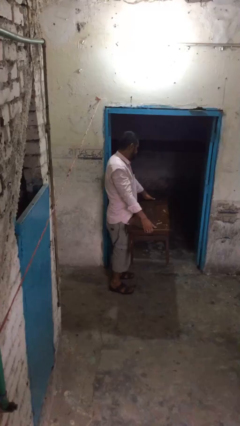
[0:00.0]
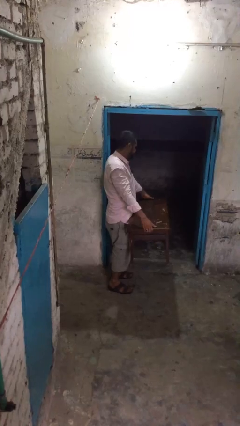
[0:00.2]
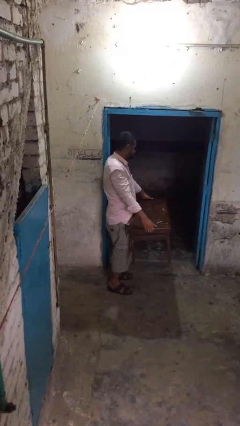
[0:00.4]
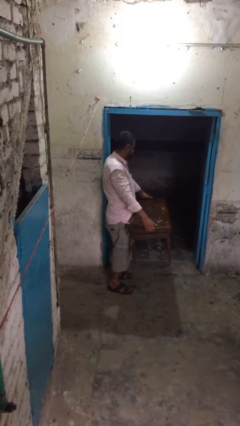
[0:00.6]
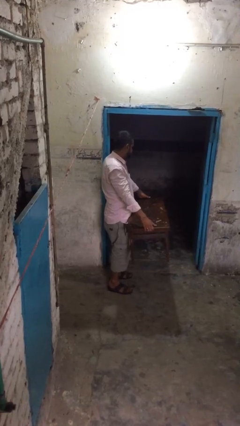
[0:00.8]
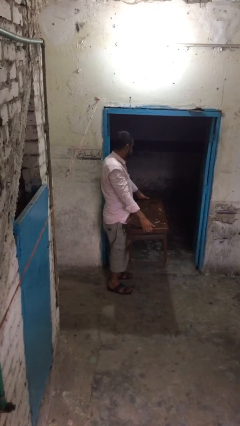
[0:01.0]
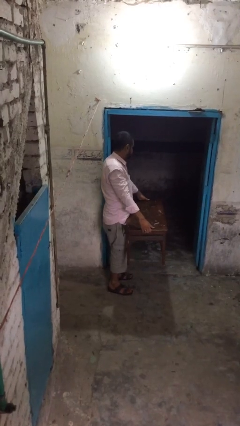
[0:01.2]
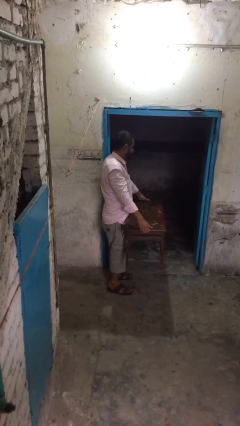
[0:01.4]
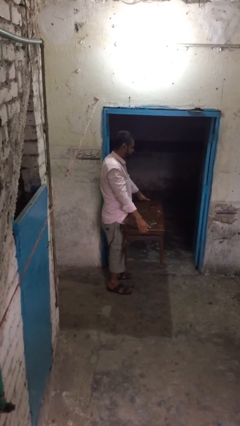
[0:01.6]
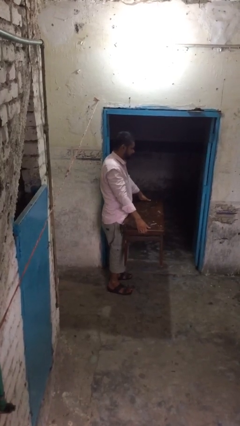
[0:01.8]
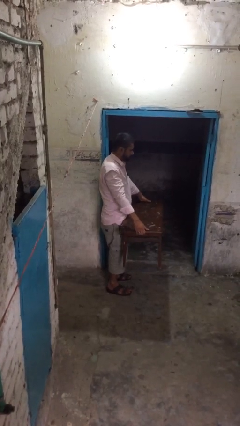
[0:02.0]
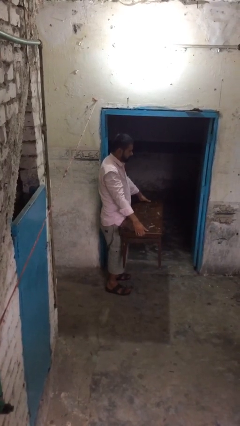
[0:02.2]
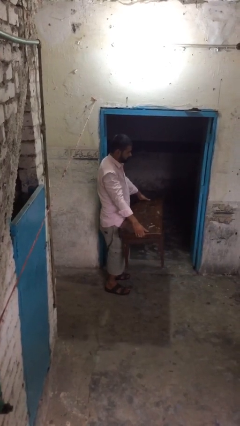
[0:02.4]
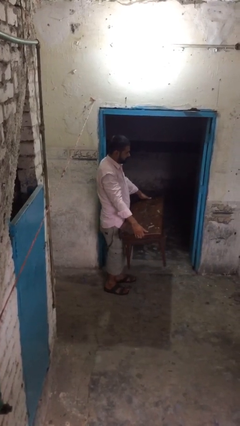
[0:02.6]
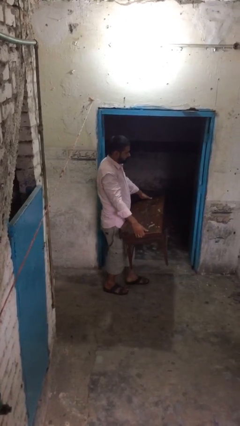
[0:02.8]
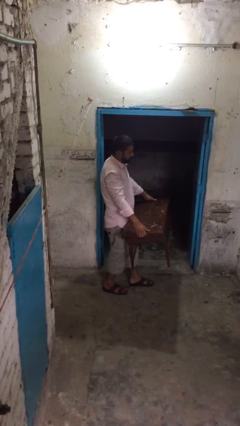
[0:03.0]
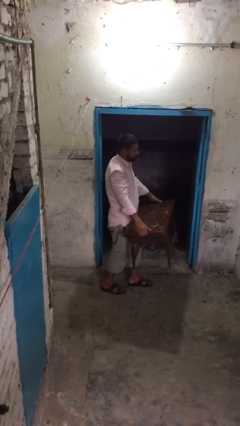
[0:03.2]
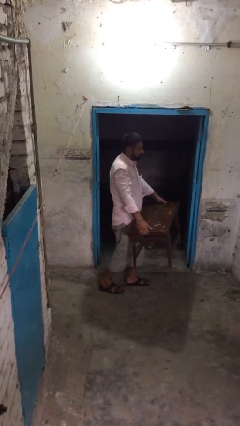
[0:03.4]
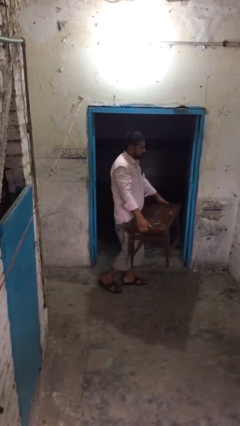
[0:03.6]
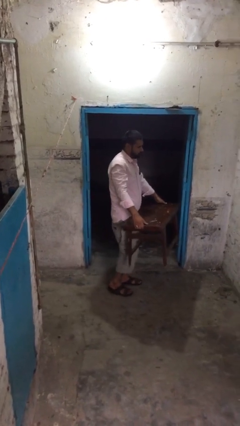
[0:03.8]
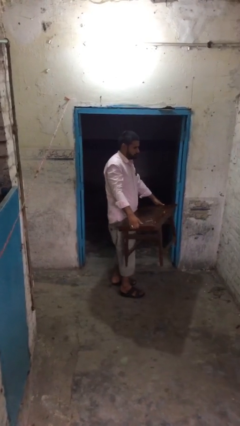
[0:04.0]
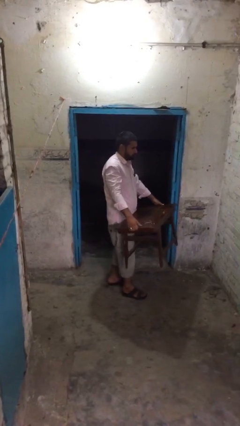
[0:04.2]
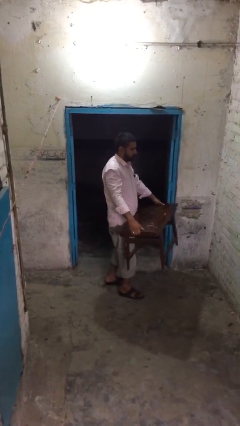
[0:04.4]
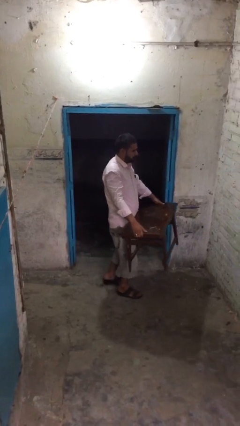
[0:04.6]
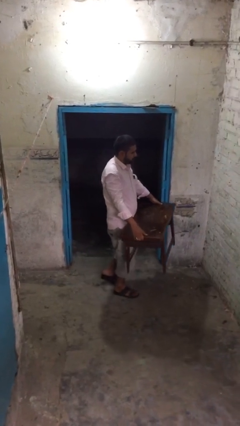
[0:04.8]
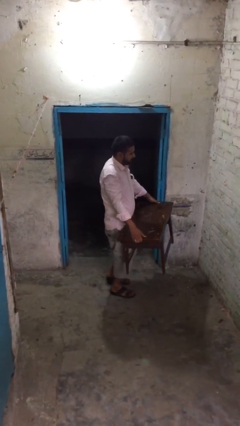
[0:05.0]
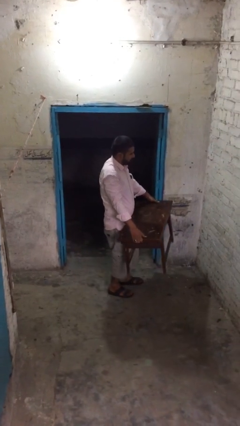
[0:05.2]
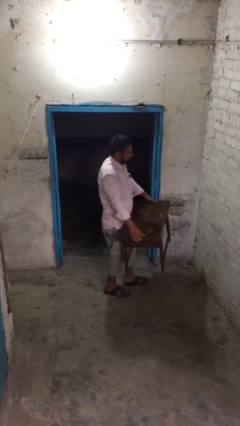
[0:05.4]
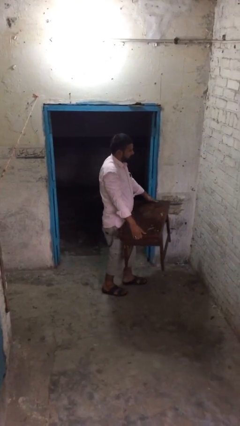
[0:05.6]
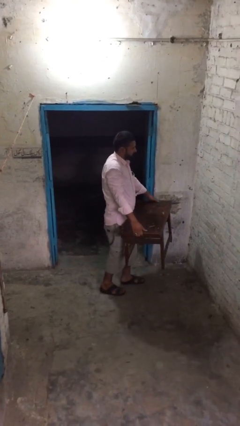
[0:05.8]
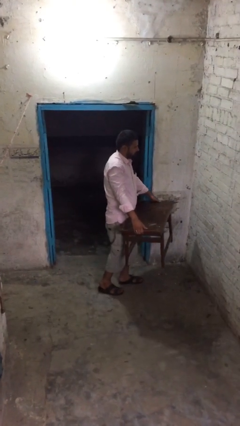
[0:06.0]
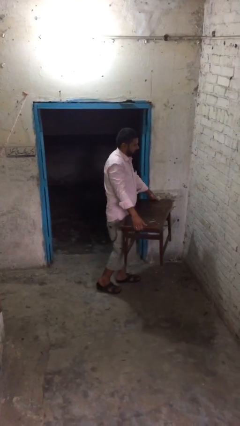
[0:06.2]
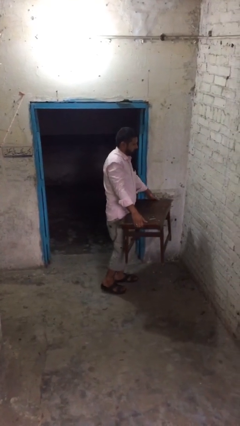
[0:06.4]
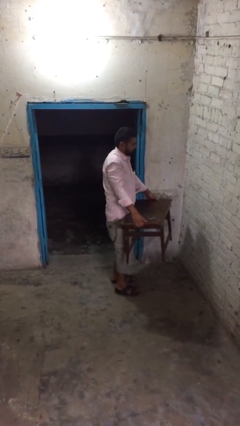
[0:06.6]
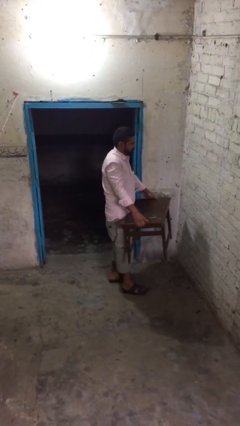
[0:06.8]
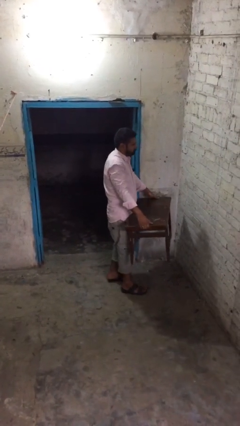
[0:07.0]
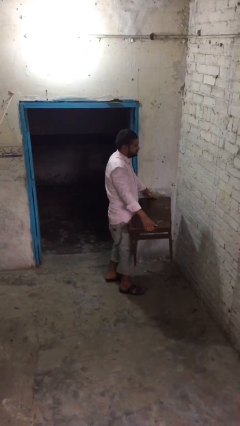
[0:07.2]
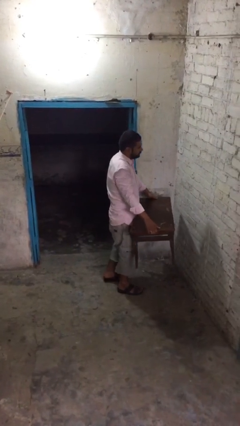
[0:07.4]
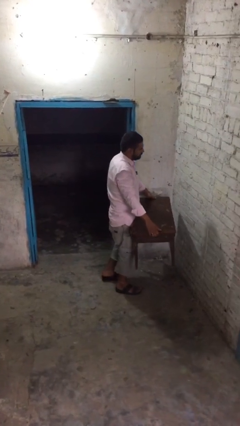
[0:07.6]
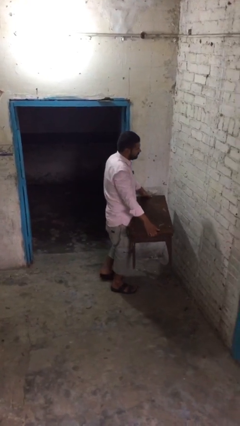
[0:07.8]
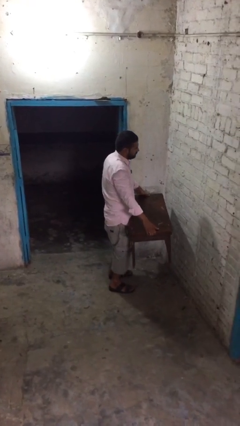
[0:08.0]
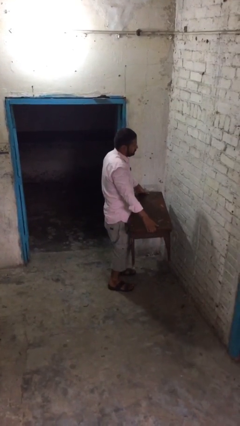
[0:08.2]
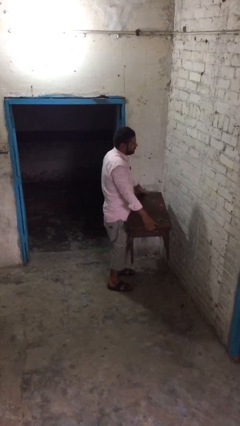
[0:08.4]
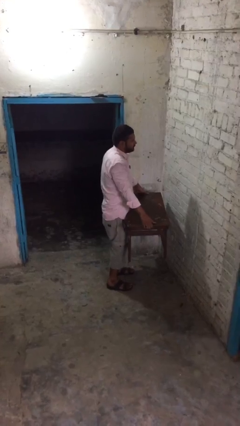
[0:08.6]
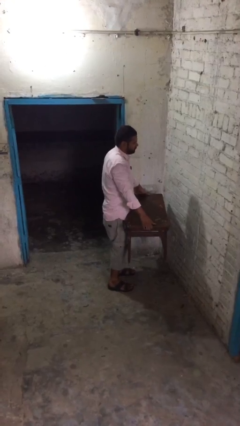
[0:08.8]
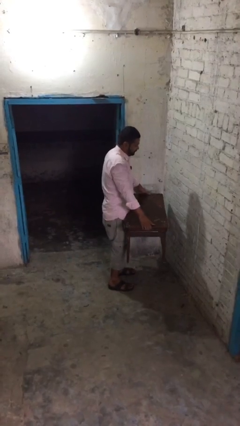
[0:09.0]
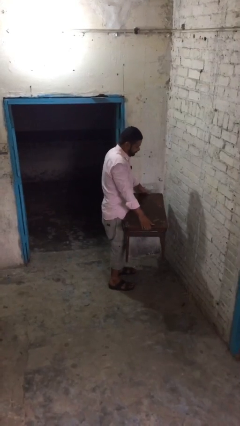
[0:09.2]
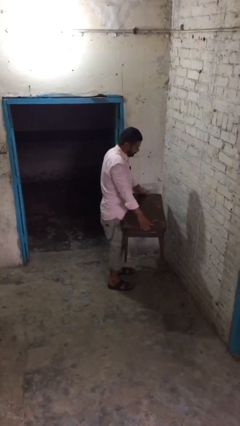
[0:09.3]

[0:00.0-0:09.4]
person carries heavy object

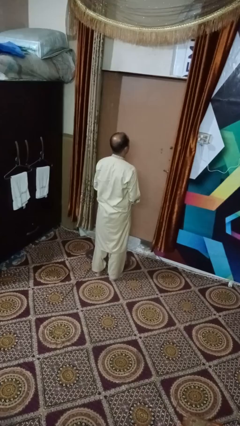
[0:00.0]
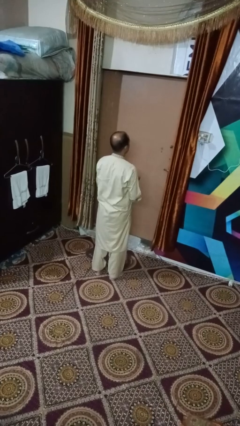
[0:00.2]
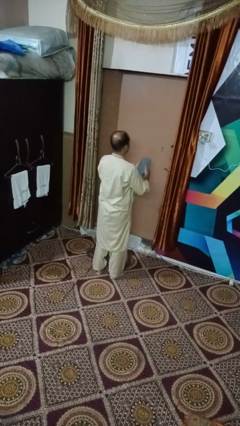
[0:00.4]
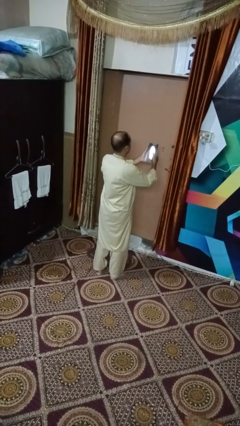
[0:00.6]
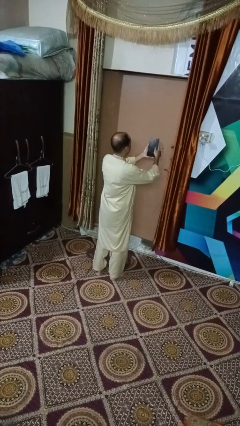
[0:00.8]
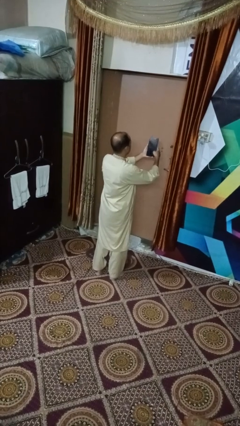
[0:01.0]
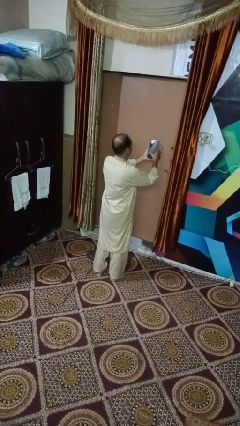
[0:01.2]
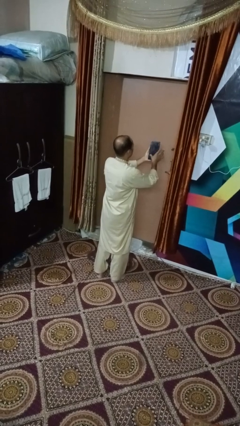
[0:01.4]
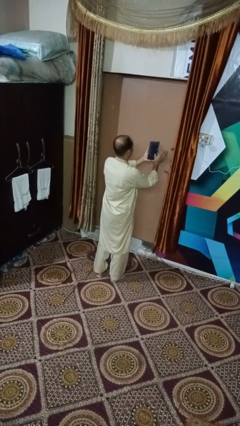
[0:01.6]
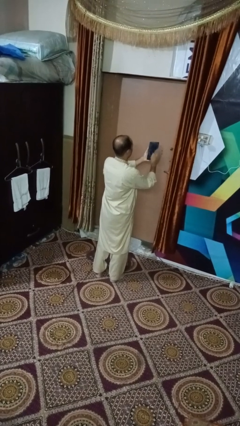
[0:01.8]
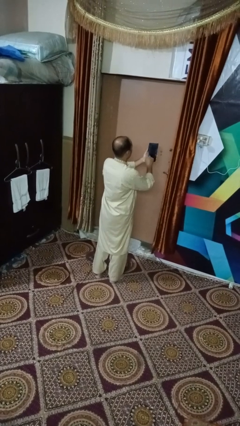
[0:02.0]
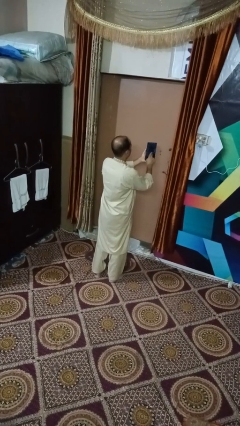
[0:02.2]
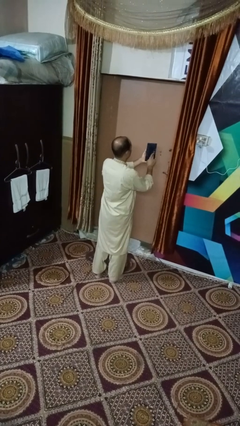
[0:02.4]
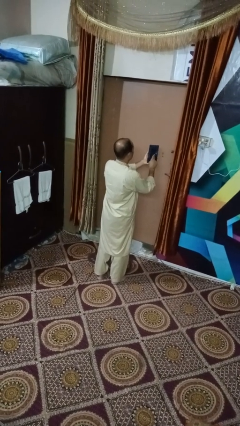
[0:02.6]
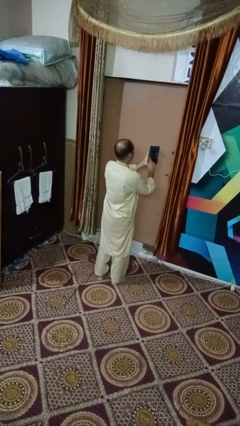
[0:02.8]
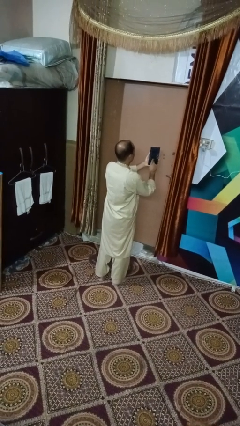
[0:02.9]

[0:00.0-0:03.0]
person interacts with tablet

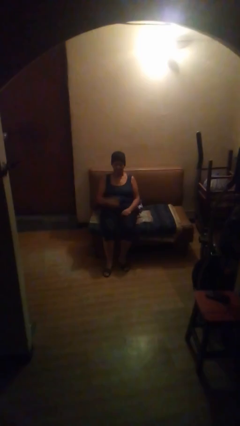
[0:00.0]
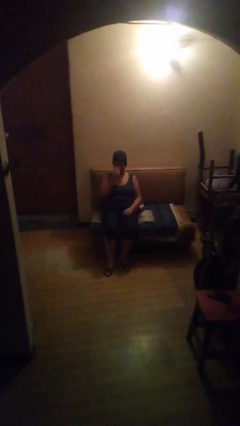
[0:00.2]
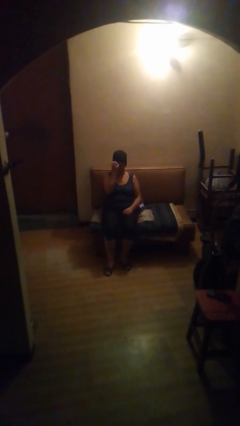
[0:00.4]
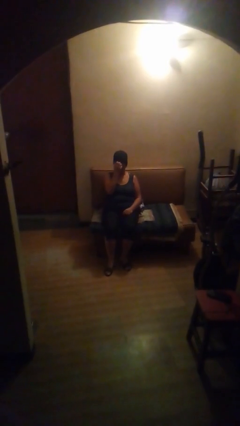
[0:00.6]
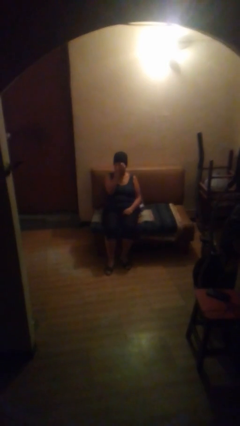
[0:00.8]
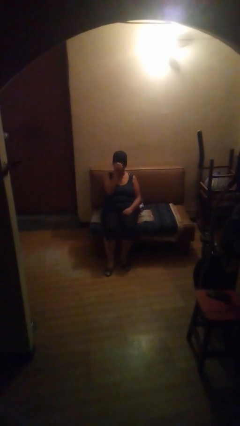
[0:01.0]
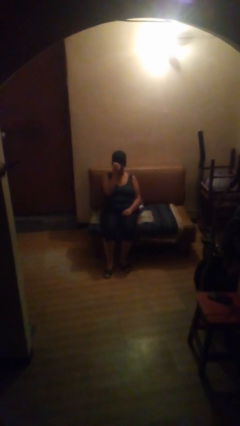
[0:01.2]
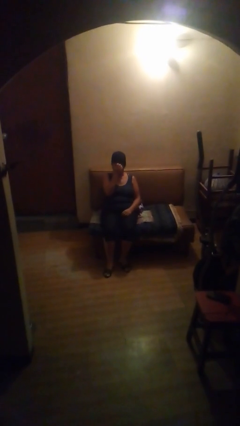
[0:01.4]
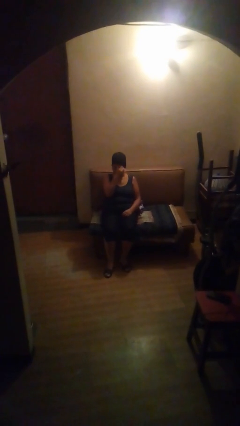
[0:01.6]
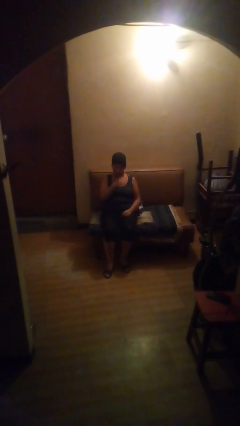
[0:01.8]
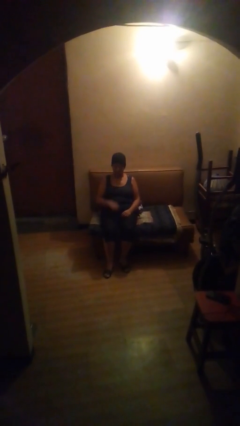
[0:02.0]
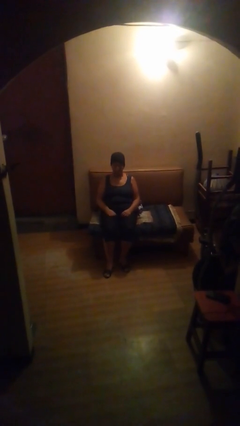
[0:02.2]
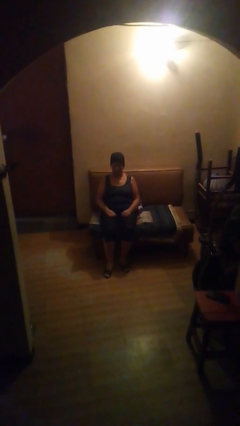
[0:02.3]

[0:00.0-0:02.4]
person scratches face

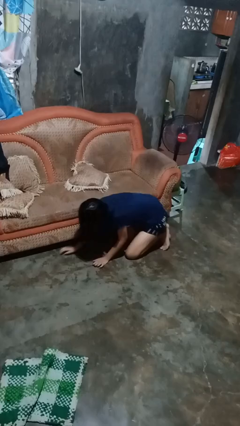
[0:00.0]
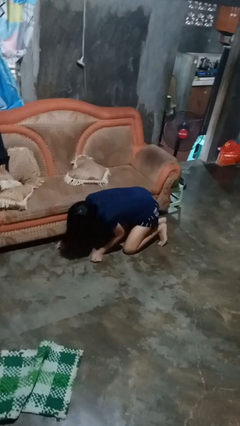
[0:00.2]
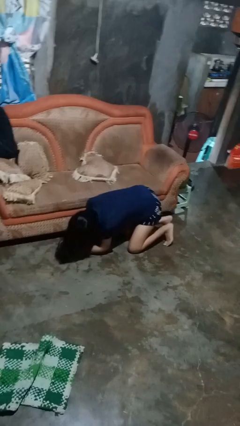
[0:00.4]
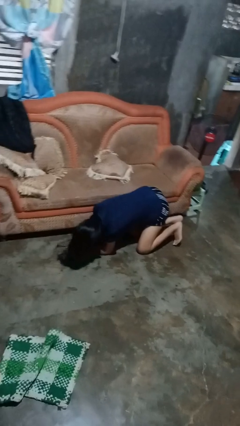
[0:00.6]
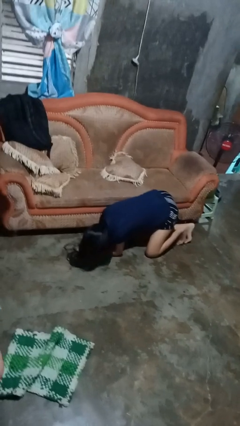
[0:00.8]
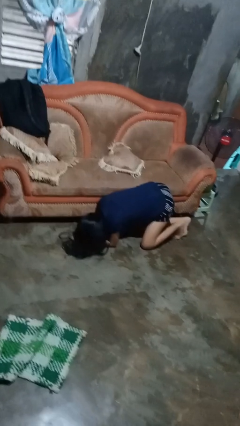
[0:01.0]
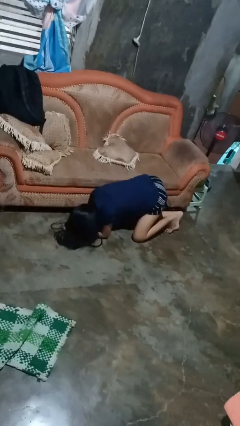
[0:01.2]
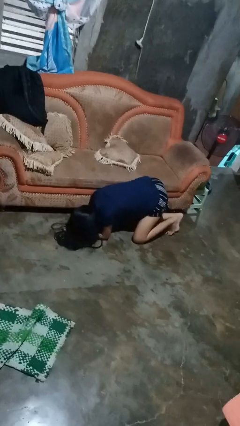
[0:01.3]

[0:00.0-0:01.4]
person searches under couch

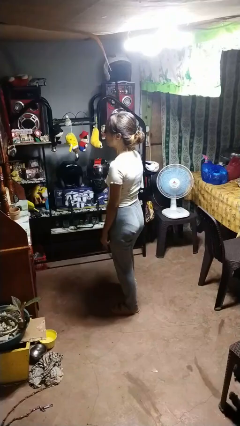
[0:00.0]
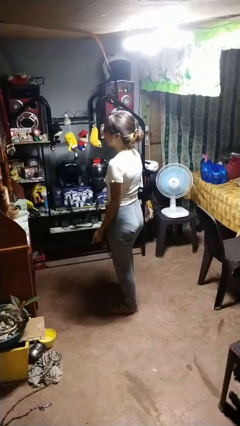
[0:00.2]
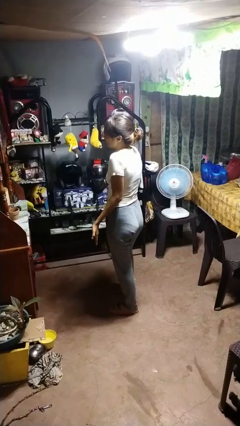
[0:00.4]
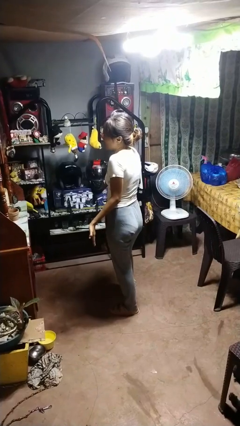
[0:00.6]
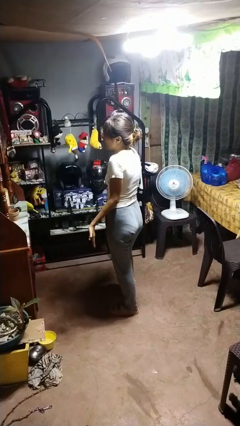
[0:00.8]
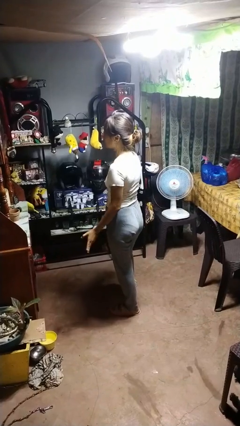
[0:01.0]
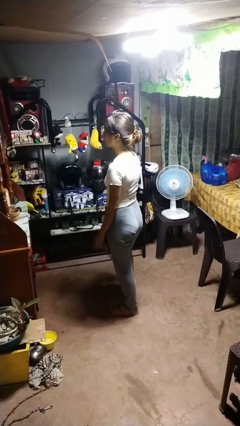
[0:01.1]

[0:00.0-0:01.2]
person shrugs

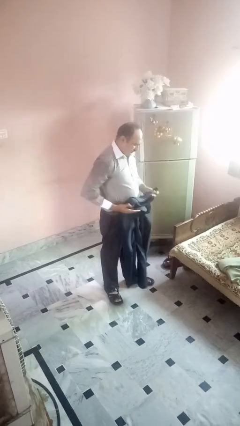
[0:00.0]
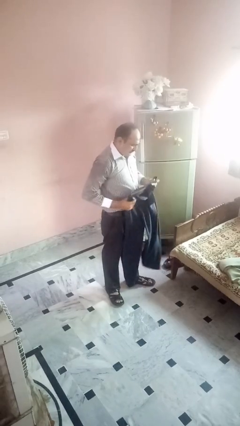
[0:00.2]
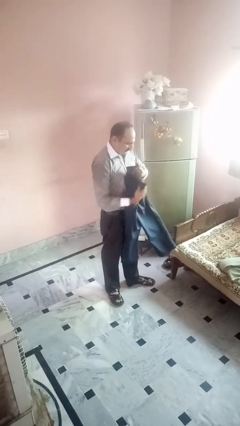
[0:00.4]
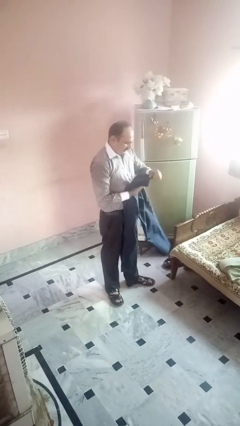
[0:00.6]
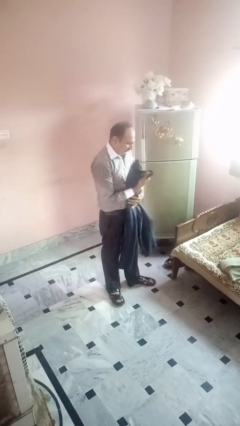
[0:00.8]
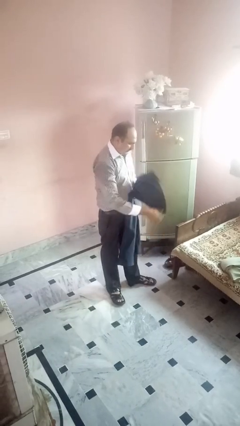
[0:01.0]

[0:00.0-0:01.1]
person folds pants
